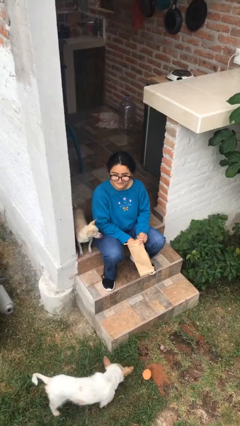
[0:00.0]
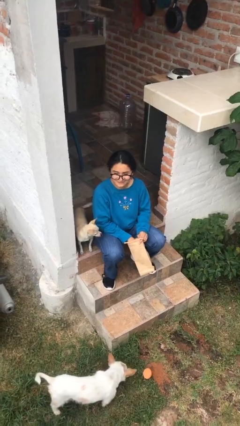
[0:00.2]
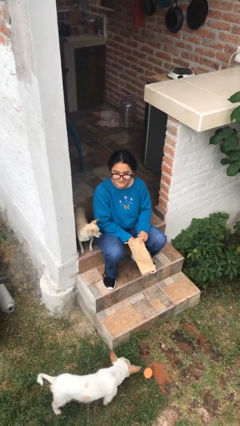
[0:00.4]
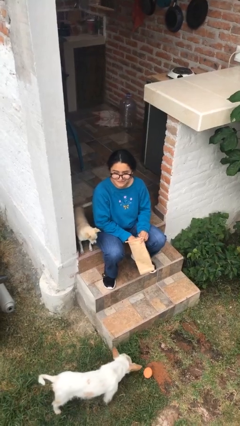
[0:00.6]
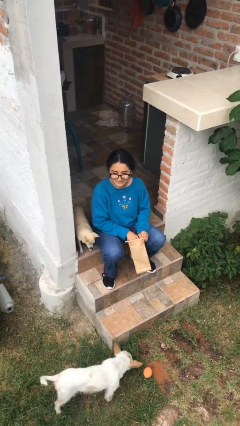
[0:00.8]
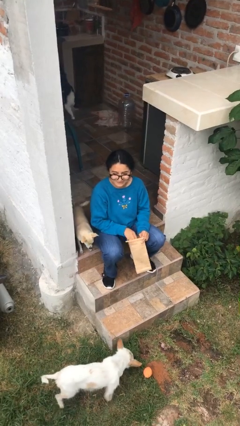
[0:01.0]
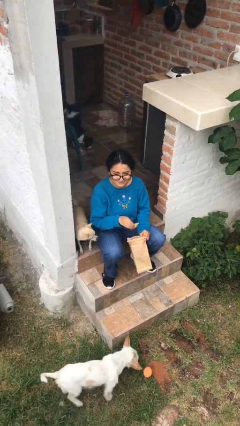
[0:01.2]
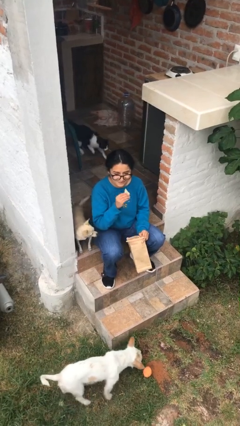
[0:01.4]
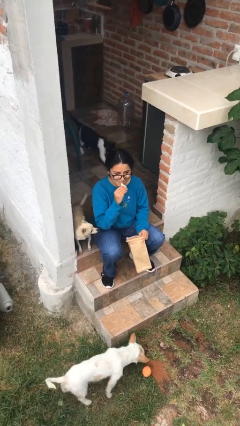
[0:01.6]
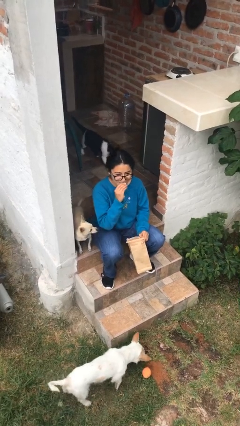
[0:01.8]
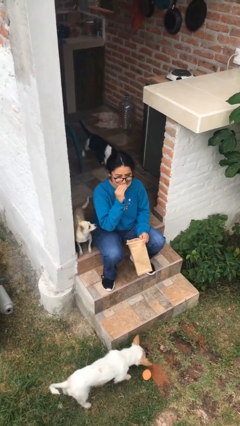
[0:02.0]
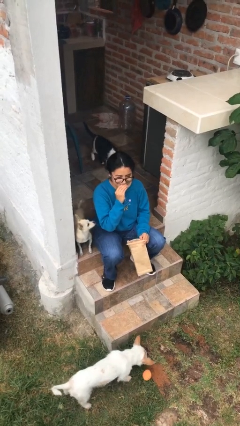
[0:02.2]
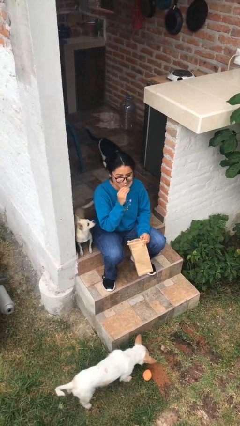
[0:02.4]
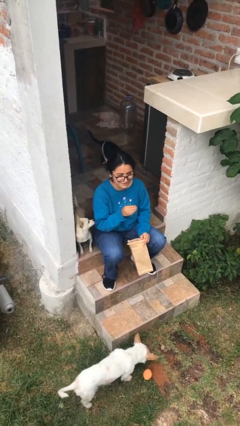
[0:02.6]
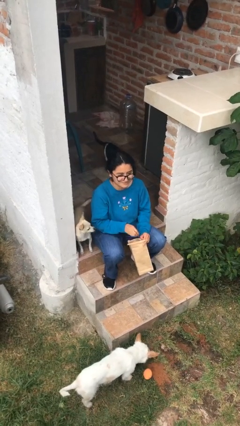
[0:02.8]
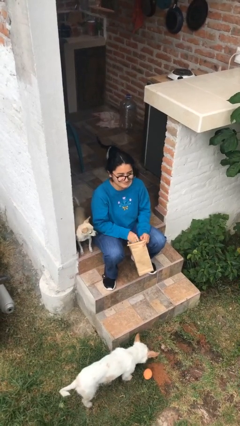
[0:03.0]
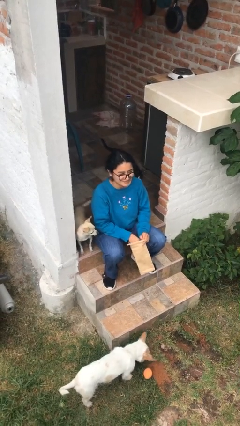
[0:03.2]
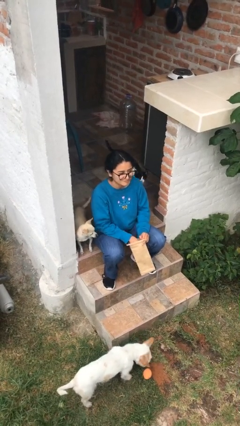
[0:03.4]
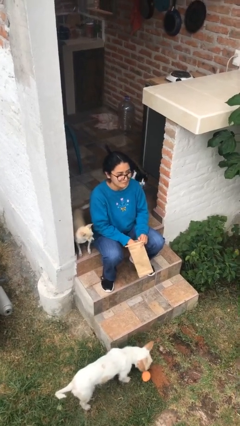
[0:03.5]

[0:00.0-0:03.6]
person eats snack from bag

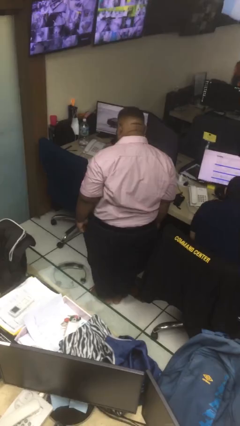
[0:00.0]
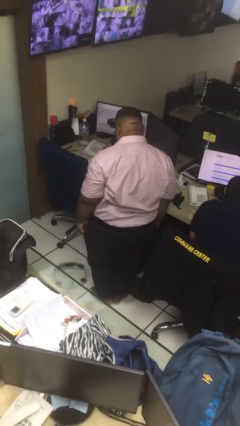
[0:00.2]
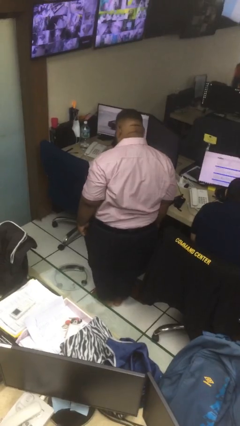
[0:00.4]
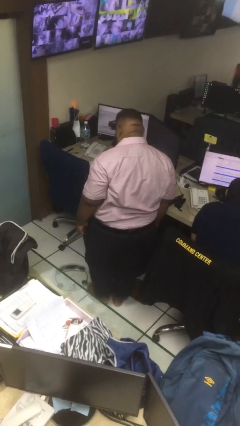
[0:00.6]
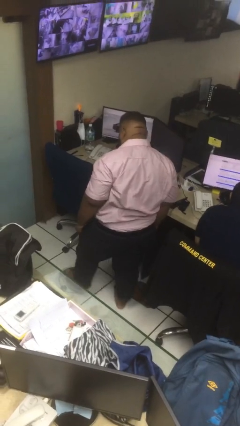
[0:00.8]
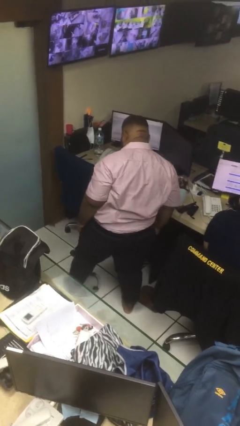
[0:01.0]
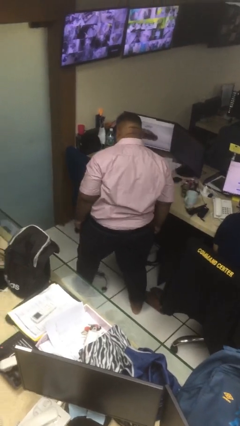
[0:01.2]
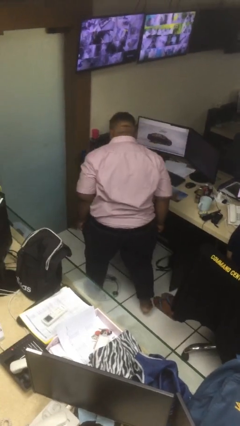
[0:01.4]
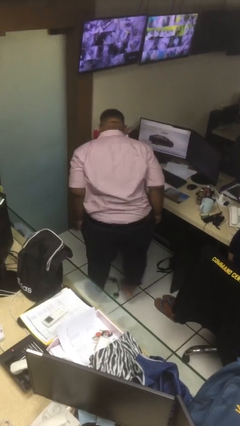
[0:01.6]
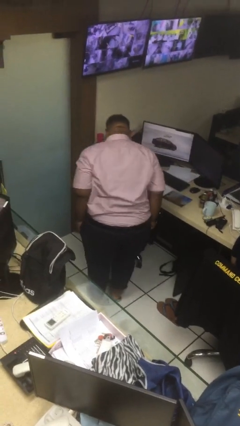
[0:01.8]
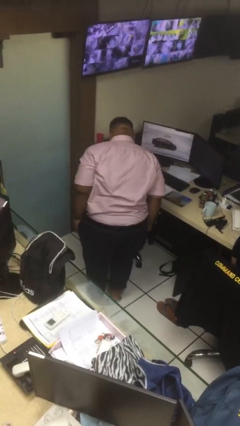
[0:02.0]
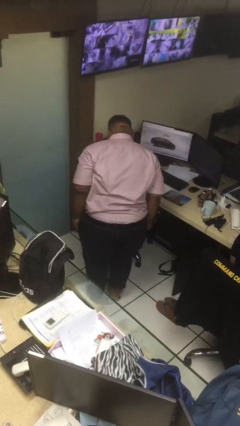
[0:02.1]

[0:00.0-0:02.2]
person uses bodyweight scale

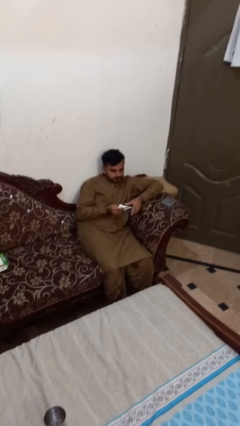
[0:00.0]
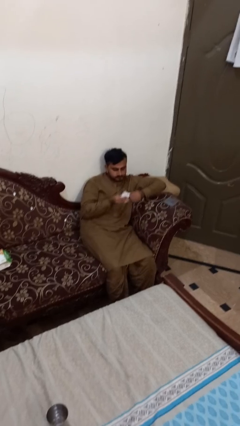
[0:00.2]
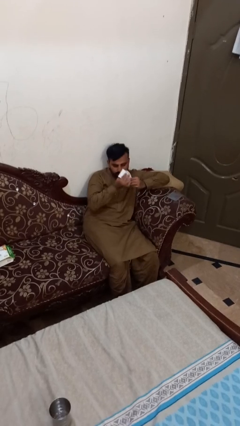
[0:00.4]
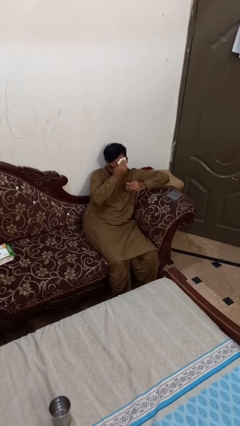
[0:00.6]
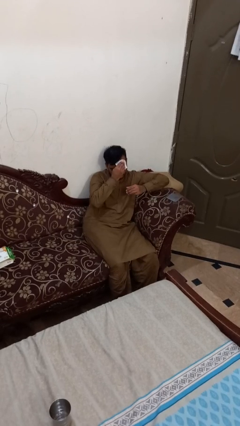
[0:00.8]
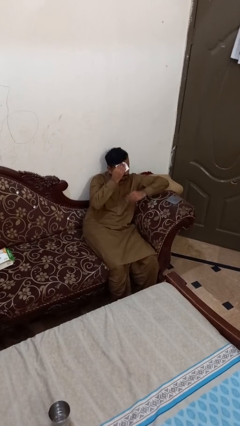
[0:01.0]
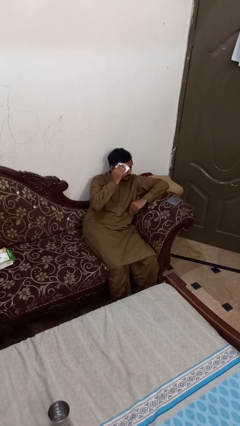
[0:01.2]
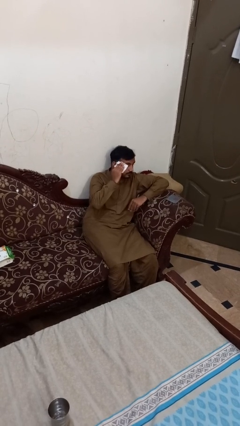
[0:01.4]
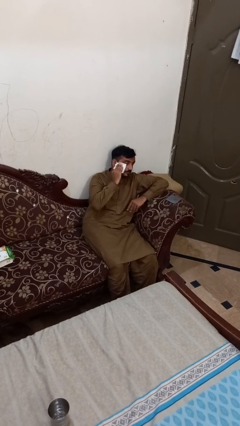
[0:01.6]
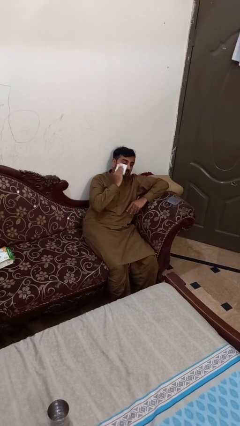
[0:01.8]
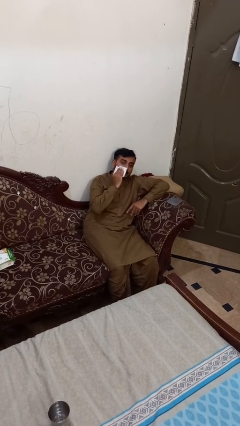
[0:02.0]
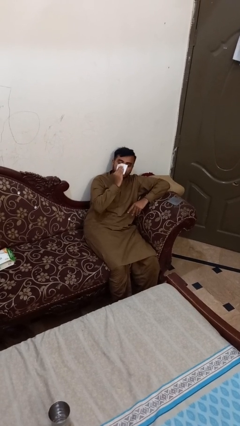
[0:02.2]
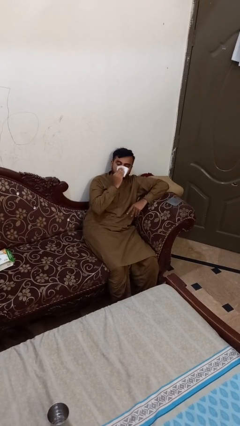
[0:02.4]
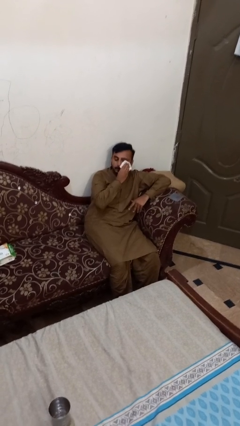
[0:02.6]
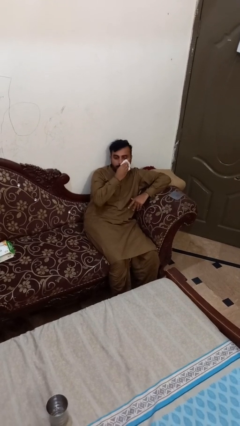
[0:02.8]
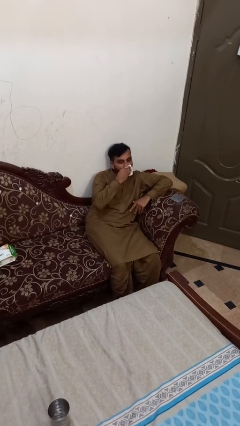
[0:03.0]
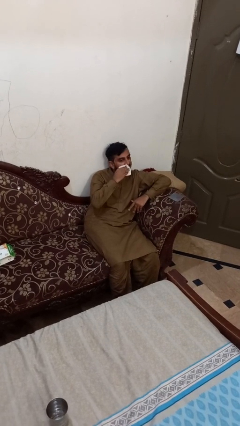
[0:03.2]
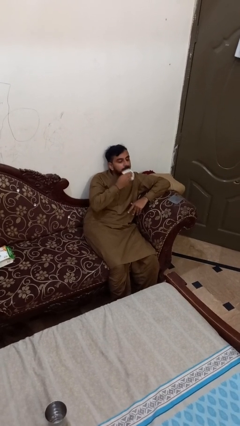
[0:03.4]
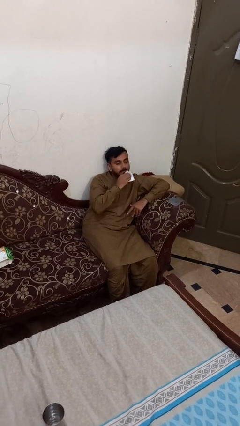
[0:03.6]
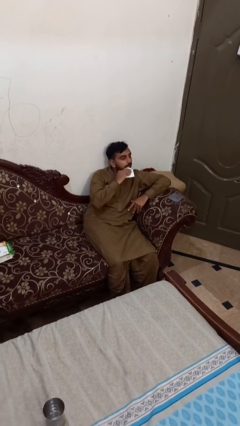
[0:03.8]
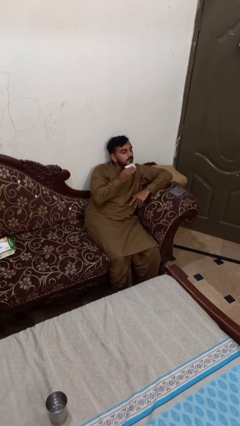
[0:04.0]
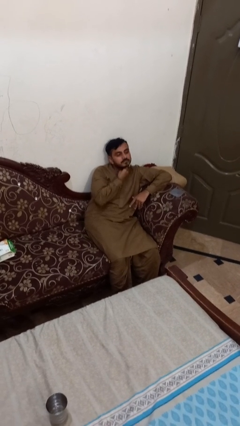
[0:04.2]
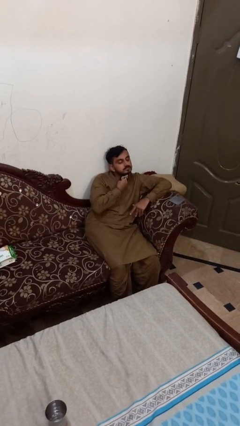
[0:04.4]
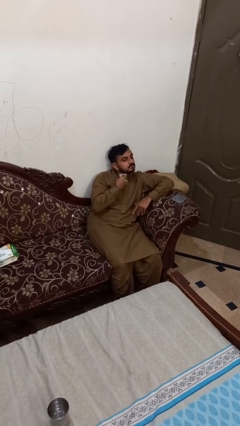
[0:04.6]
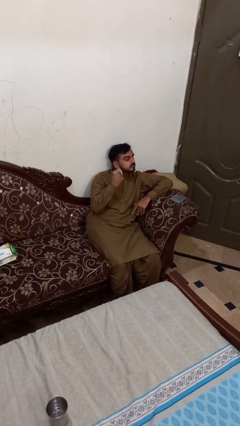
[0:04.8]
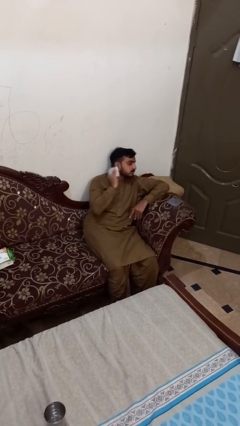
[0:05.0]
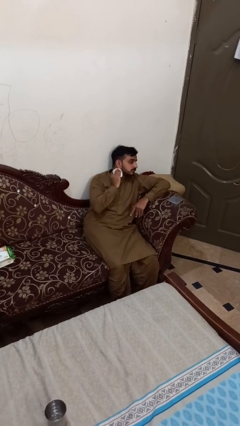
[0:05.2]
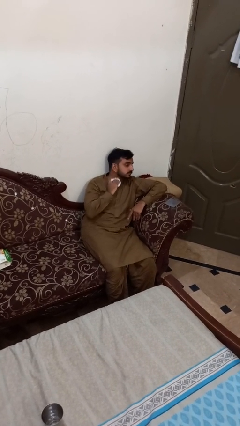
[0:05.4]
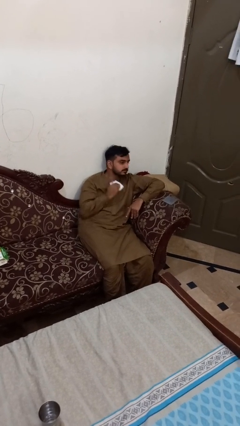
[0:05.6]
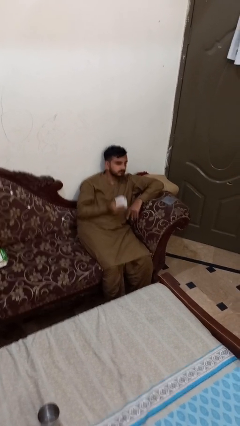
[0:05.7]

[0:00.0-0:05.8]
person wipes mouth with napkin

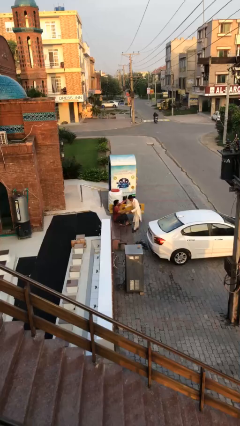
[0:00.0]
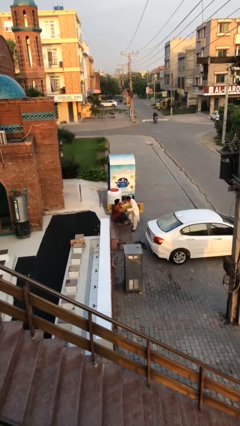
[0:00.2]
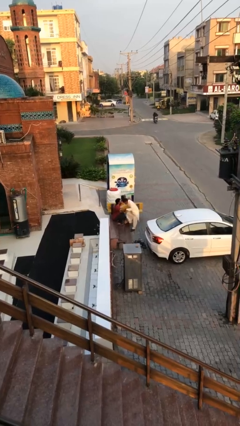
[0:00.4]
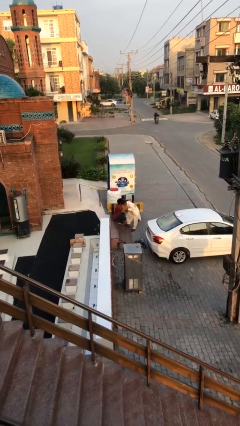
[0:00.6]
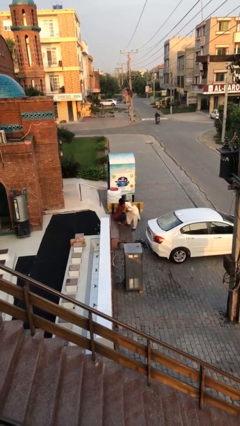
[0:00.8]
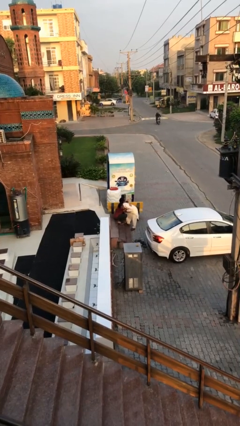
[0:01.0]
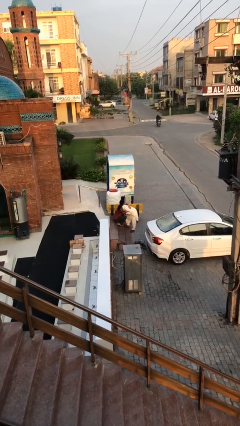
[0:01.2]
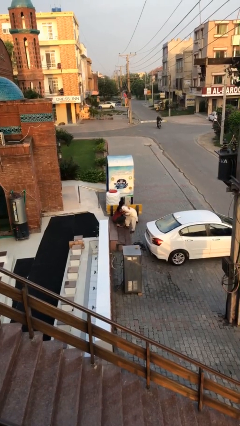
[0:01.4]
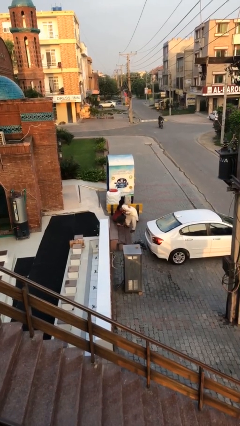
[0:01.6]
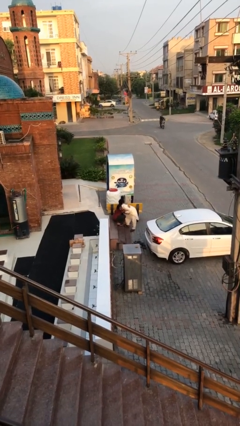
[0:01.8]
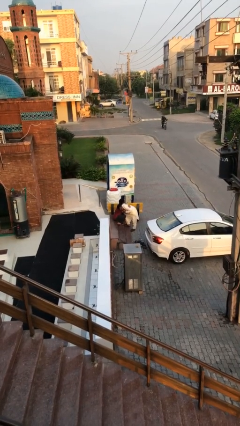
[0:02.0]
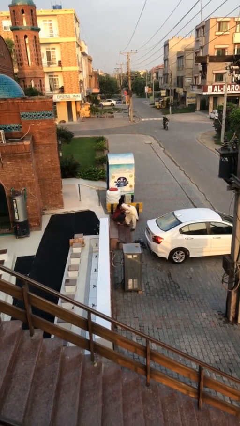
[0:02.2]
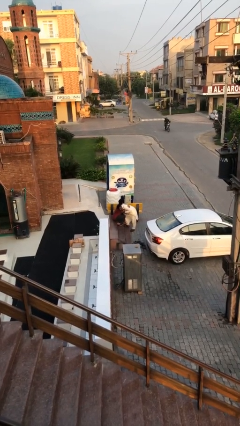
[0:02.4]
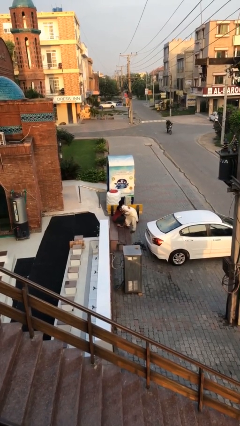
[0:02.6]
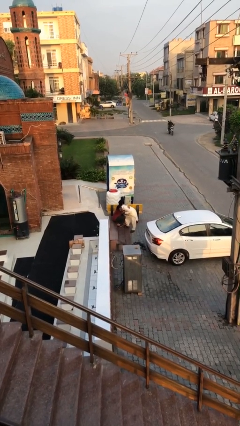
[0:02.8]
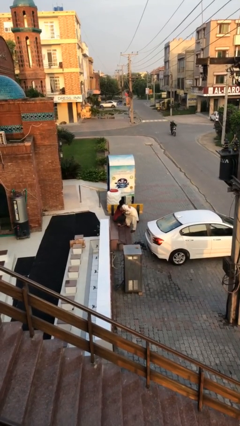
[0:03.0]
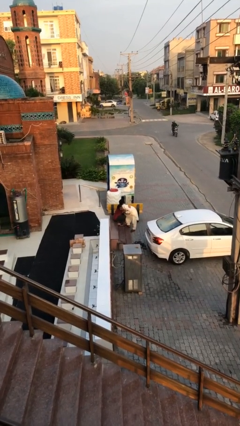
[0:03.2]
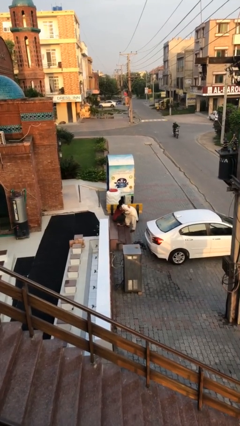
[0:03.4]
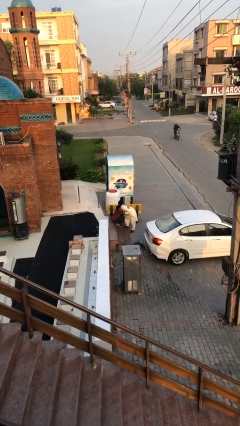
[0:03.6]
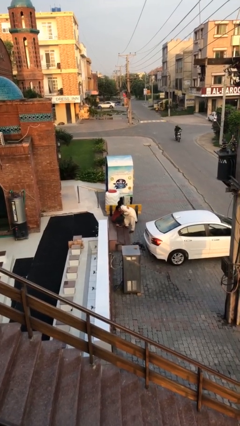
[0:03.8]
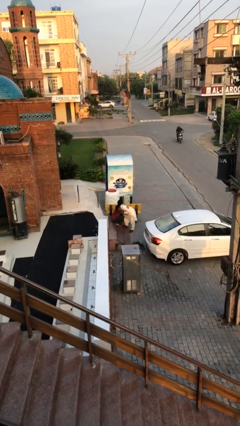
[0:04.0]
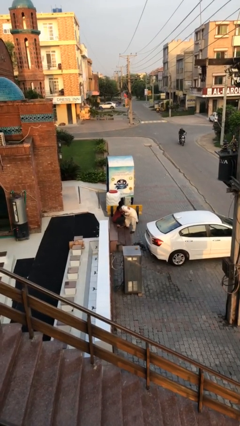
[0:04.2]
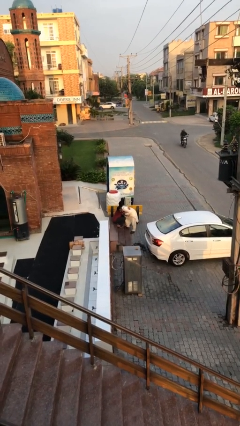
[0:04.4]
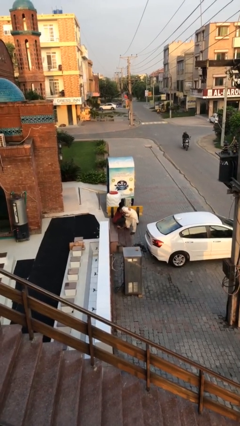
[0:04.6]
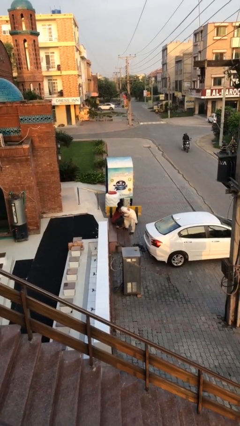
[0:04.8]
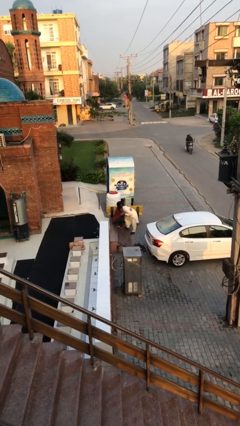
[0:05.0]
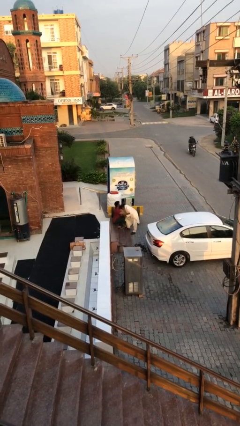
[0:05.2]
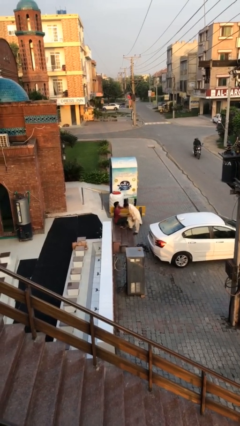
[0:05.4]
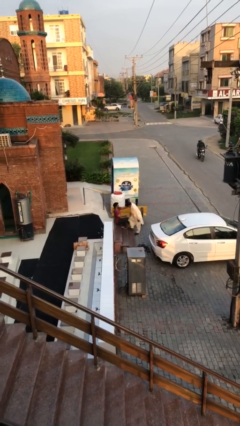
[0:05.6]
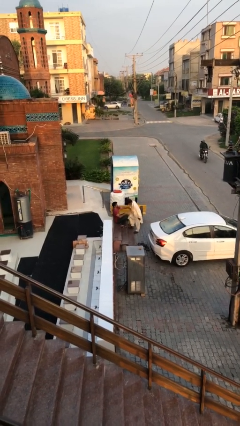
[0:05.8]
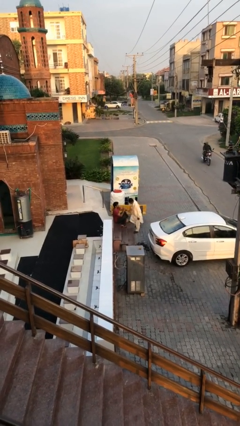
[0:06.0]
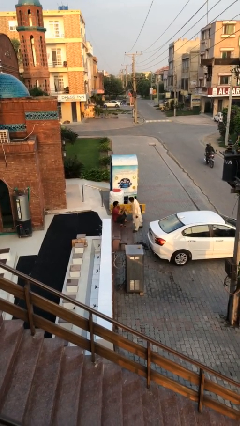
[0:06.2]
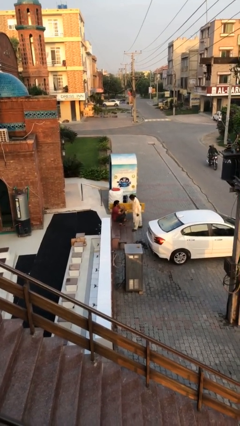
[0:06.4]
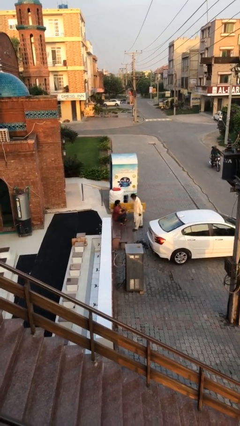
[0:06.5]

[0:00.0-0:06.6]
person embraces person

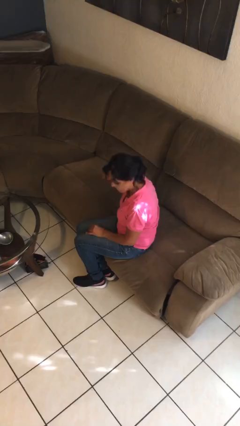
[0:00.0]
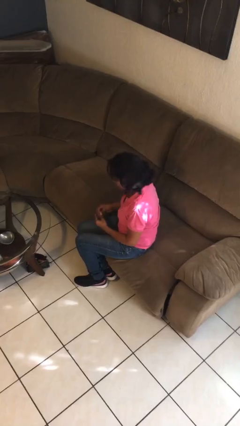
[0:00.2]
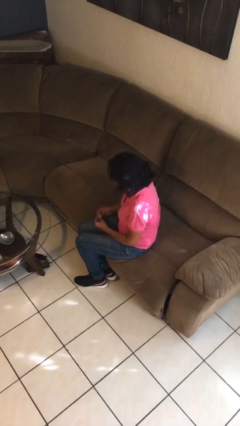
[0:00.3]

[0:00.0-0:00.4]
person takes off hairtie
